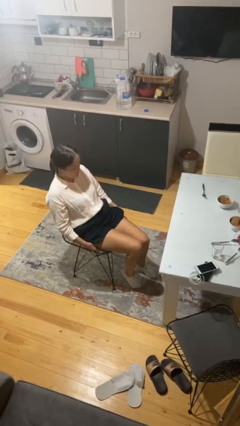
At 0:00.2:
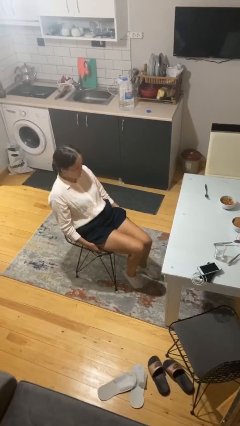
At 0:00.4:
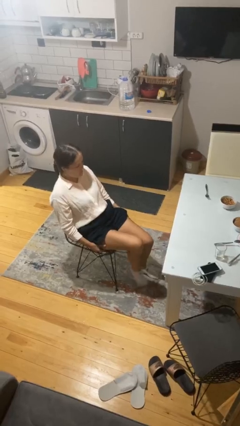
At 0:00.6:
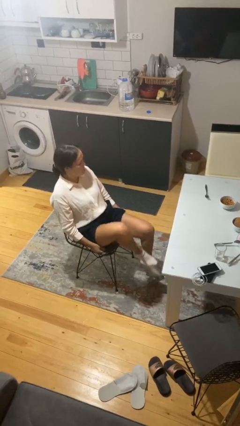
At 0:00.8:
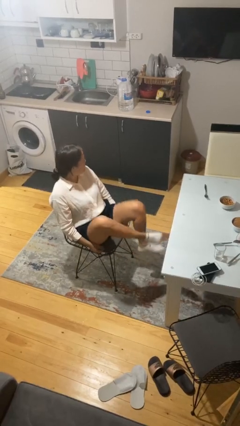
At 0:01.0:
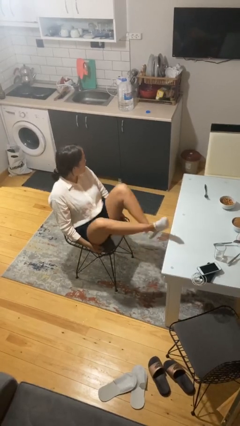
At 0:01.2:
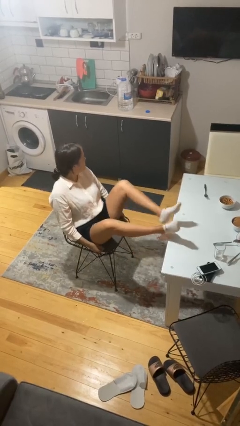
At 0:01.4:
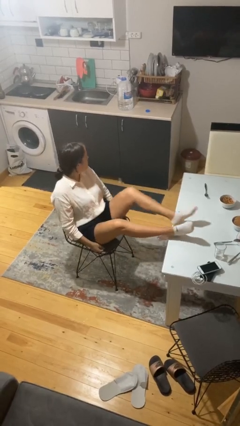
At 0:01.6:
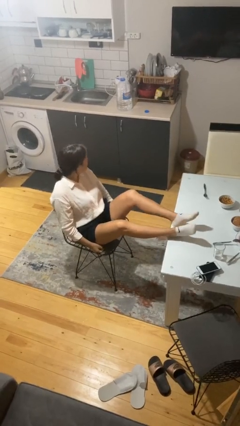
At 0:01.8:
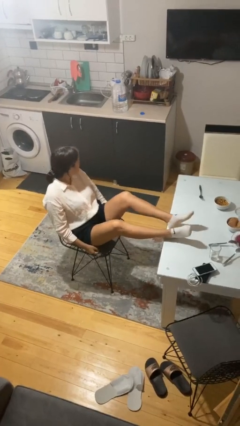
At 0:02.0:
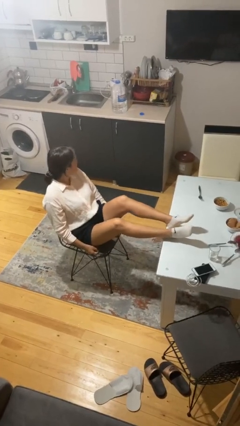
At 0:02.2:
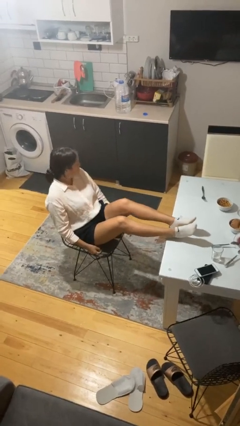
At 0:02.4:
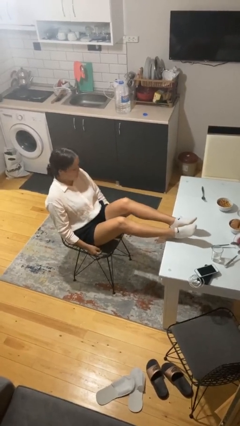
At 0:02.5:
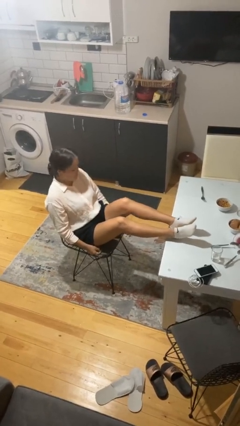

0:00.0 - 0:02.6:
person puts feet up

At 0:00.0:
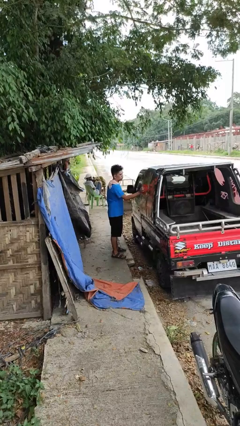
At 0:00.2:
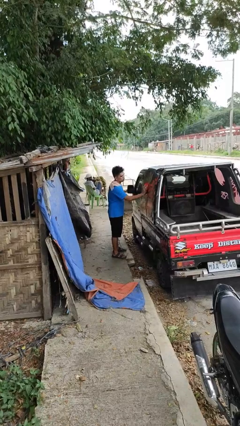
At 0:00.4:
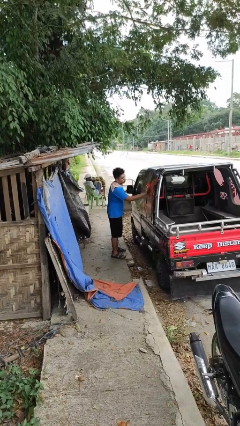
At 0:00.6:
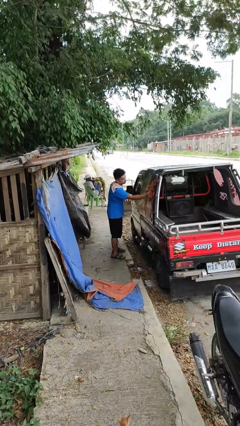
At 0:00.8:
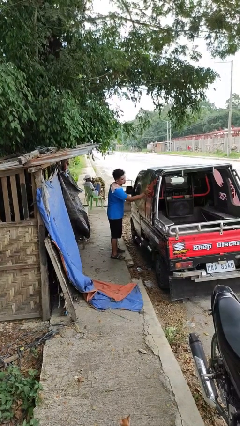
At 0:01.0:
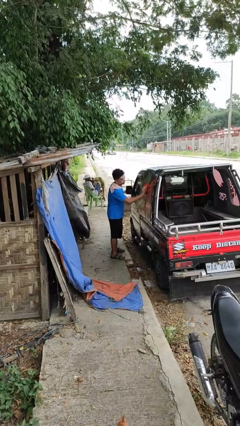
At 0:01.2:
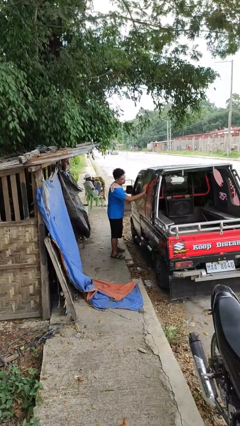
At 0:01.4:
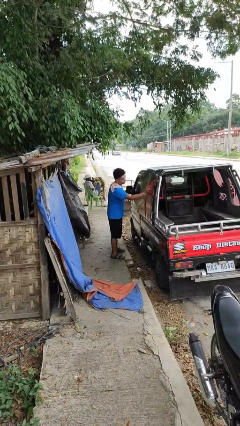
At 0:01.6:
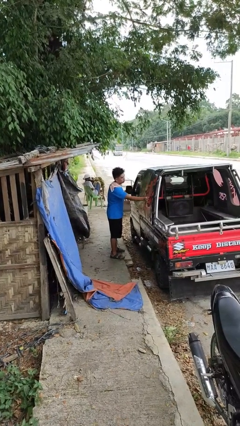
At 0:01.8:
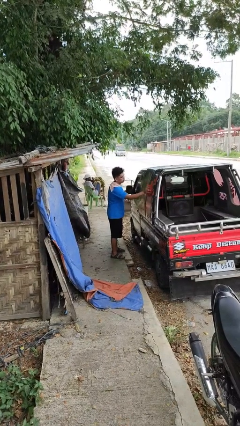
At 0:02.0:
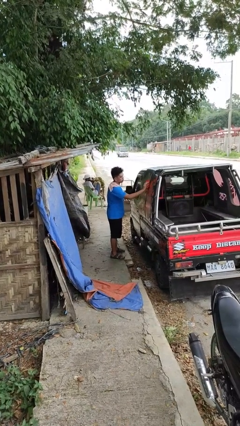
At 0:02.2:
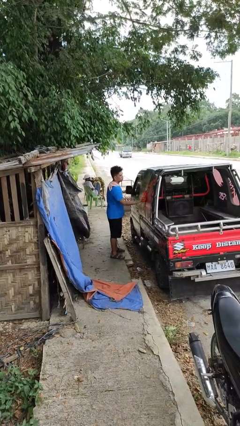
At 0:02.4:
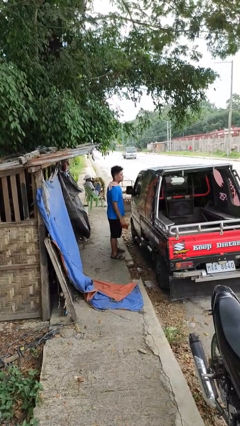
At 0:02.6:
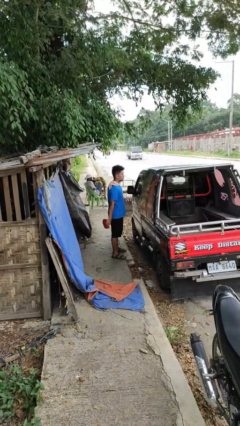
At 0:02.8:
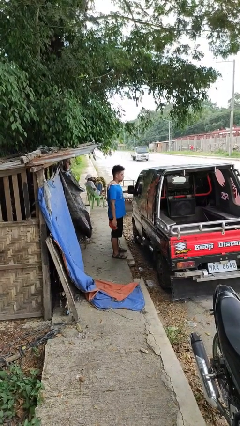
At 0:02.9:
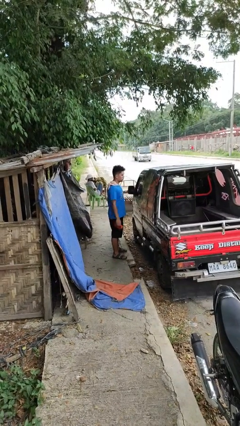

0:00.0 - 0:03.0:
person polishes car with rag

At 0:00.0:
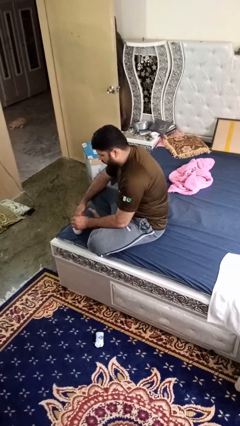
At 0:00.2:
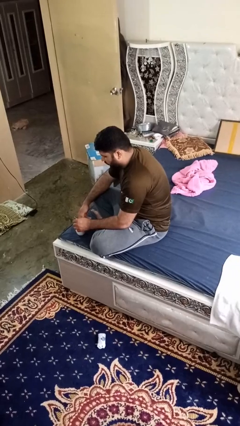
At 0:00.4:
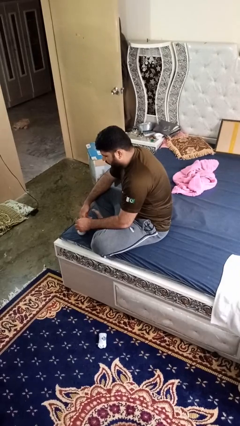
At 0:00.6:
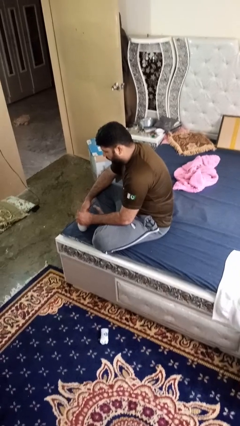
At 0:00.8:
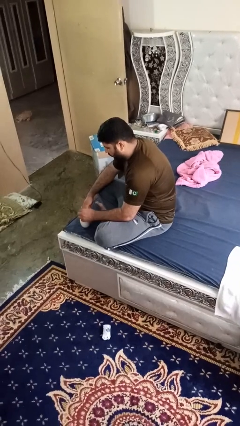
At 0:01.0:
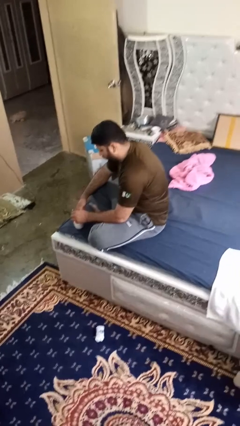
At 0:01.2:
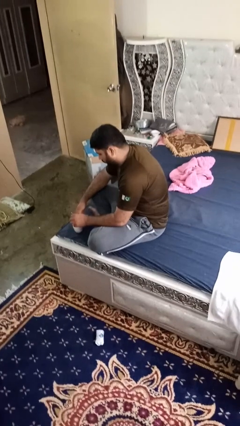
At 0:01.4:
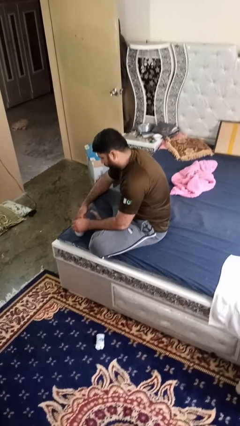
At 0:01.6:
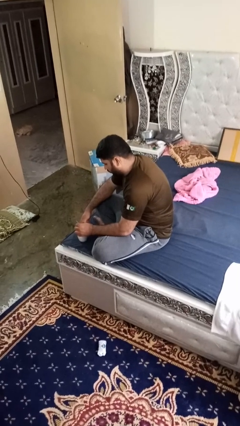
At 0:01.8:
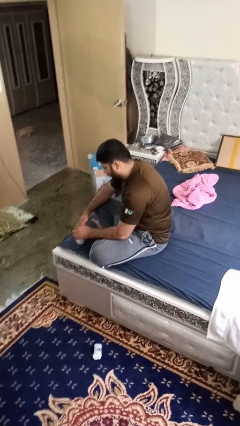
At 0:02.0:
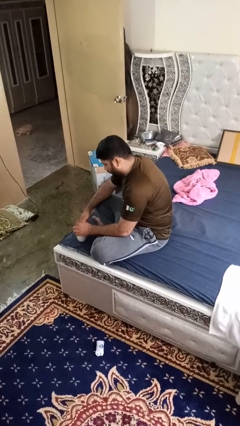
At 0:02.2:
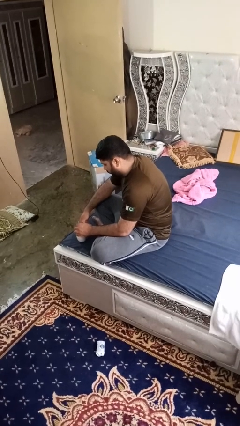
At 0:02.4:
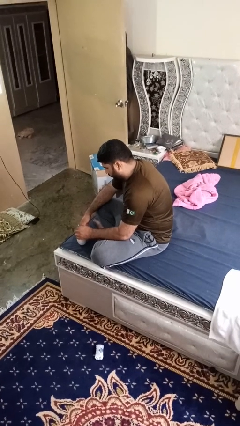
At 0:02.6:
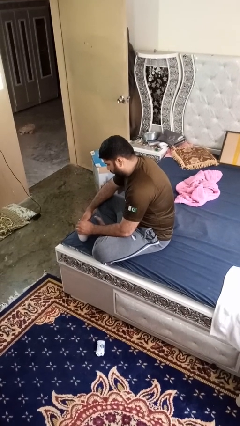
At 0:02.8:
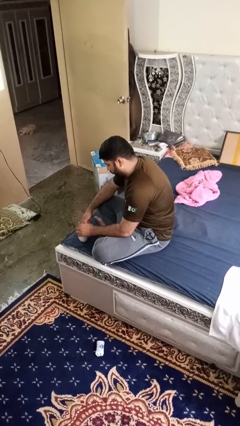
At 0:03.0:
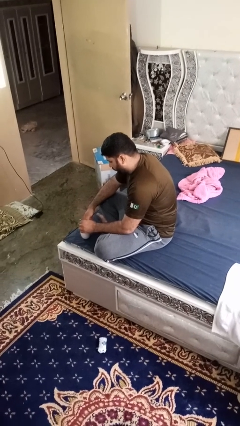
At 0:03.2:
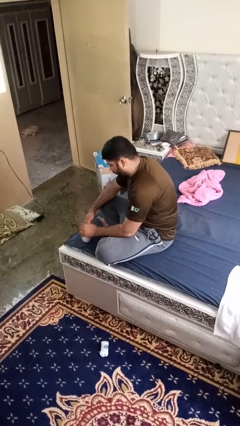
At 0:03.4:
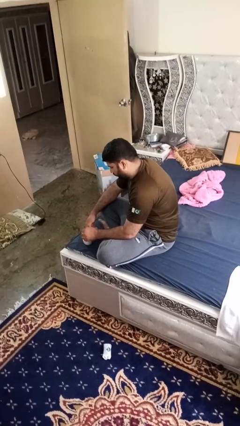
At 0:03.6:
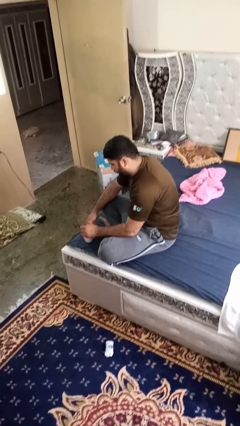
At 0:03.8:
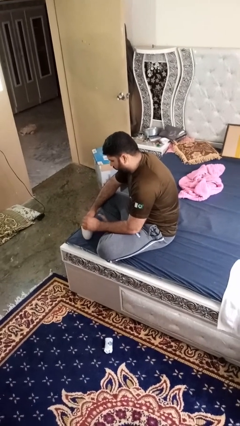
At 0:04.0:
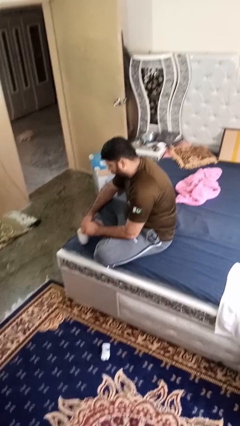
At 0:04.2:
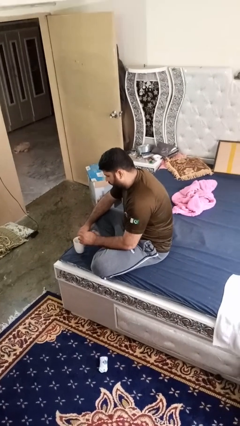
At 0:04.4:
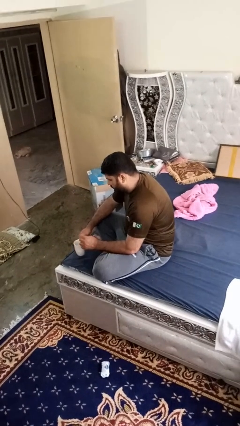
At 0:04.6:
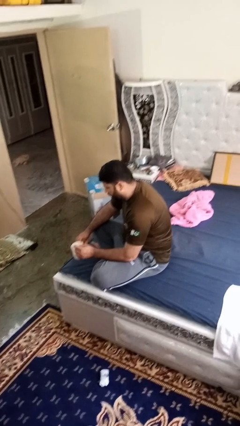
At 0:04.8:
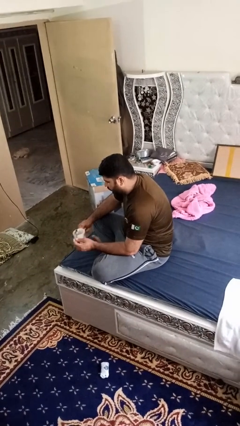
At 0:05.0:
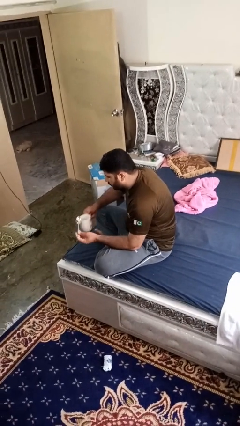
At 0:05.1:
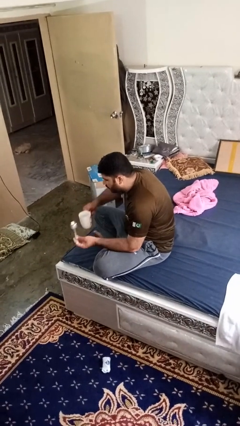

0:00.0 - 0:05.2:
person stirs mug

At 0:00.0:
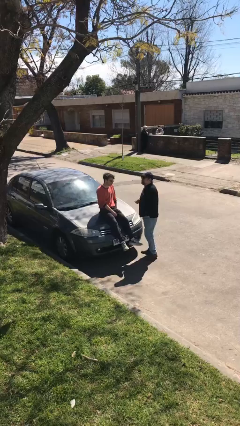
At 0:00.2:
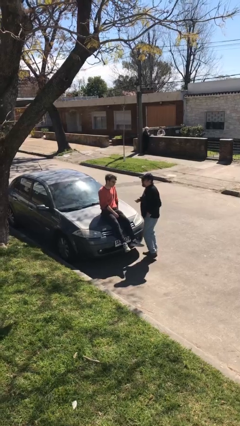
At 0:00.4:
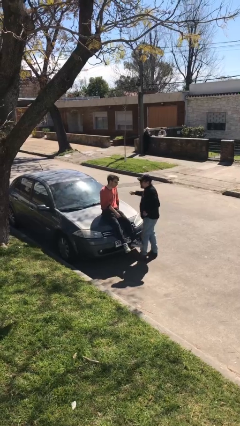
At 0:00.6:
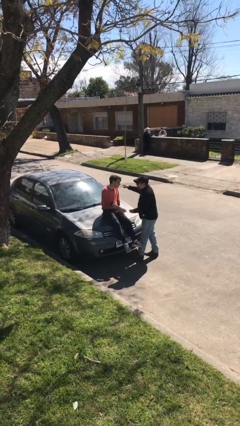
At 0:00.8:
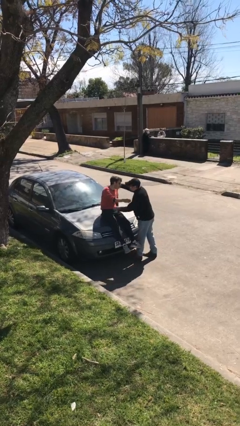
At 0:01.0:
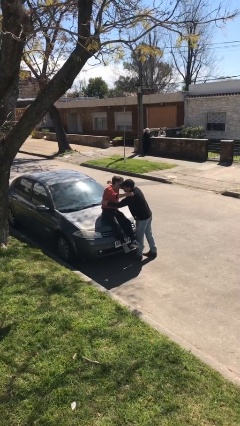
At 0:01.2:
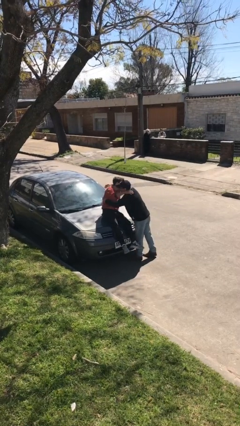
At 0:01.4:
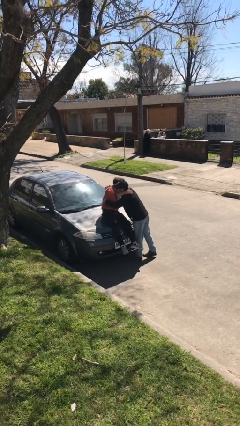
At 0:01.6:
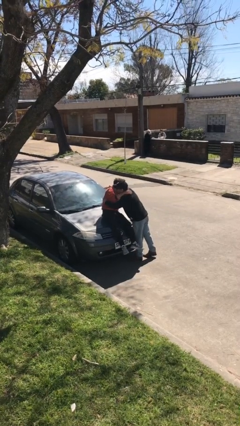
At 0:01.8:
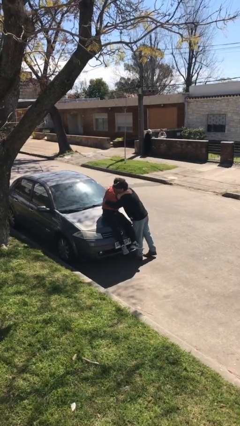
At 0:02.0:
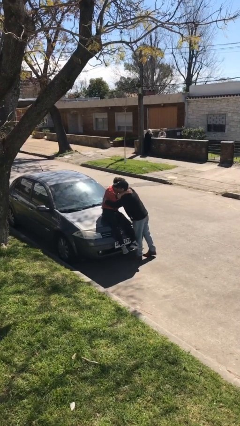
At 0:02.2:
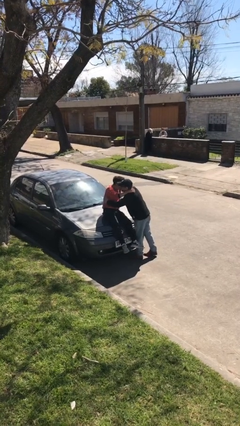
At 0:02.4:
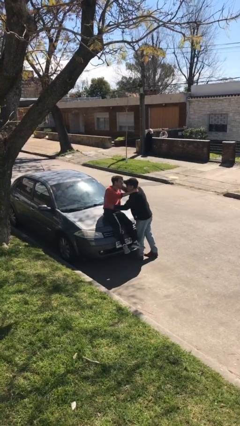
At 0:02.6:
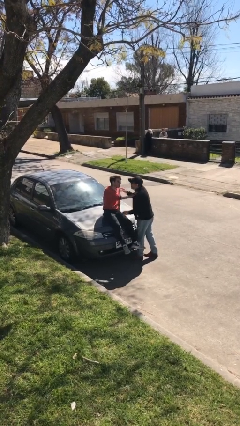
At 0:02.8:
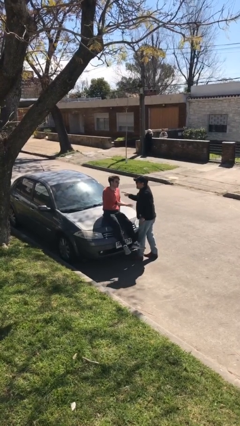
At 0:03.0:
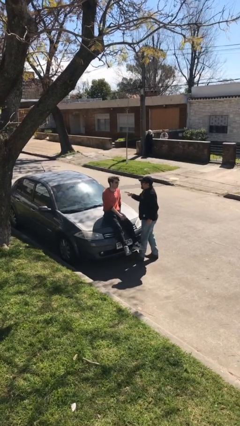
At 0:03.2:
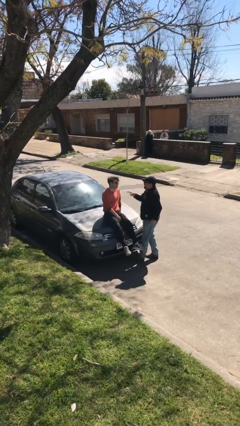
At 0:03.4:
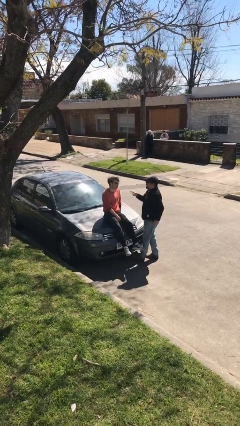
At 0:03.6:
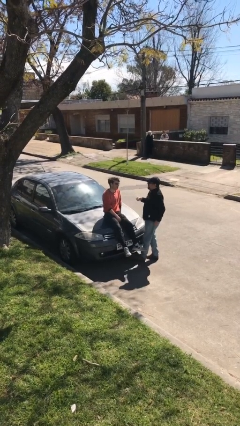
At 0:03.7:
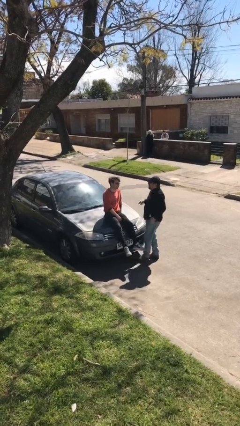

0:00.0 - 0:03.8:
person embraces person

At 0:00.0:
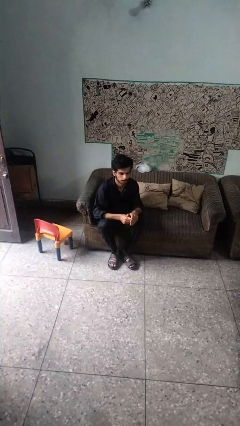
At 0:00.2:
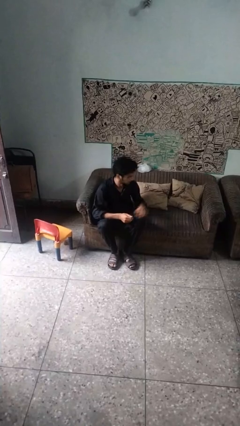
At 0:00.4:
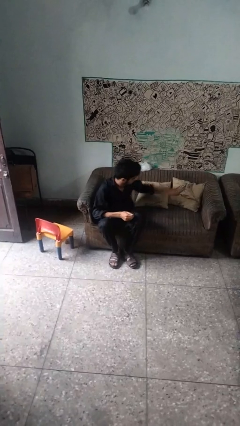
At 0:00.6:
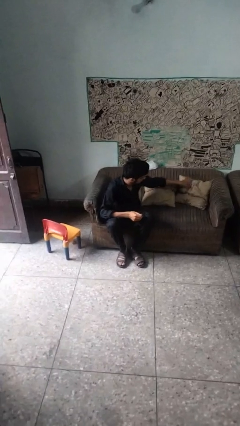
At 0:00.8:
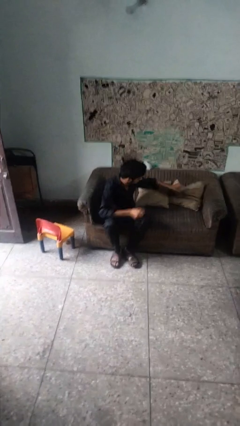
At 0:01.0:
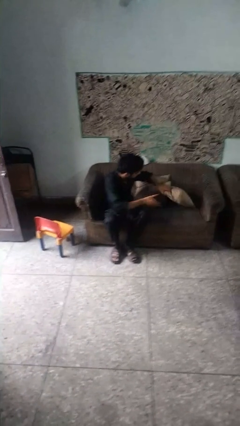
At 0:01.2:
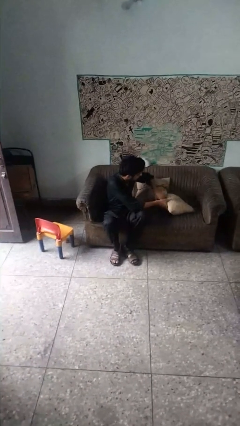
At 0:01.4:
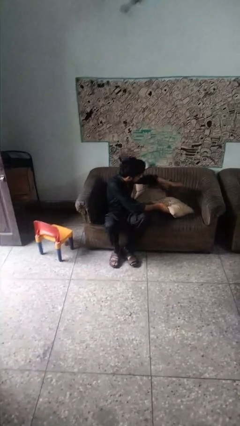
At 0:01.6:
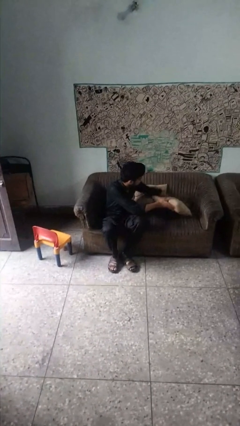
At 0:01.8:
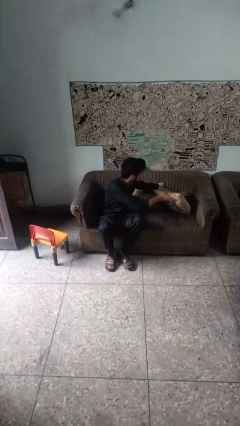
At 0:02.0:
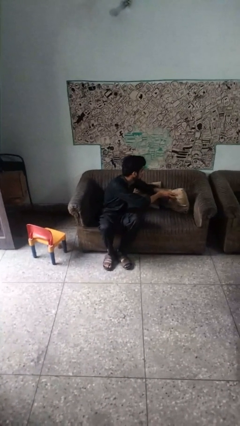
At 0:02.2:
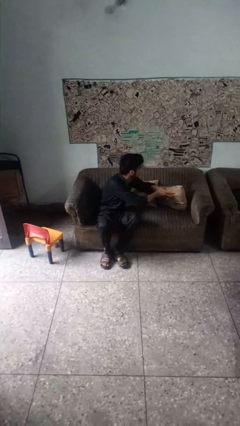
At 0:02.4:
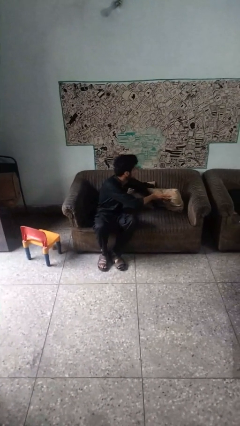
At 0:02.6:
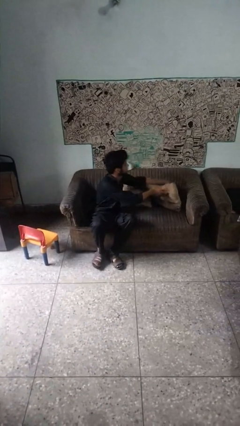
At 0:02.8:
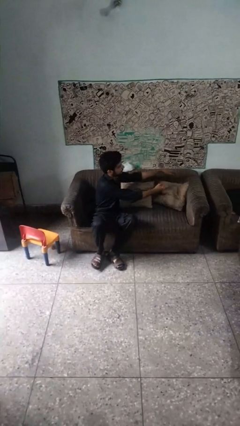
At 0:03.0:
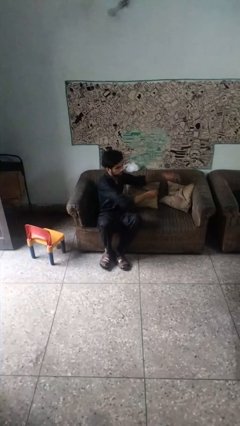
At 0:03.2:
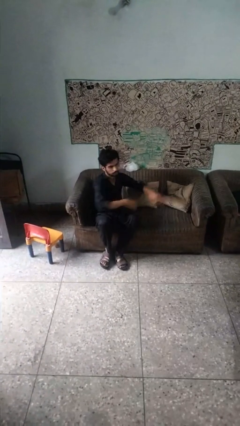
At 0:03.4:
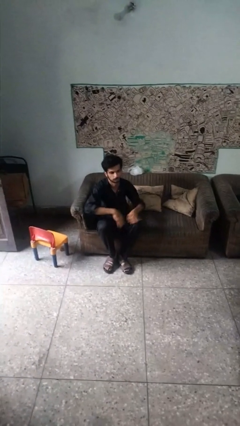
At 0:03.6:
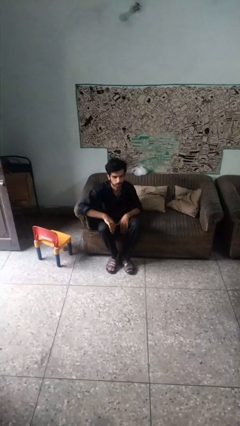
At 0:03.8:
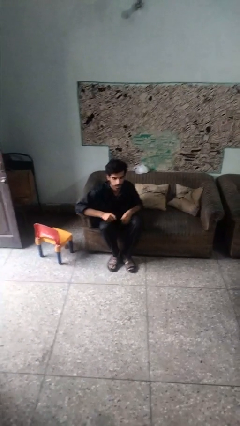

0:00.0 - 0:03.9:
person searches in couch
